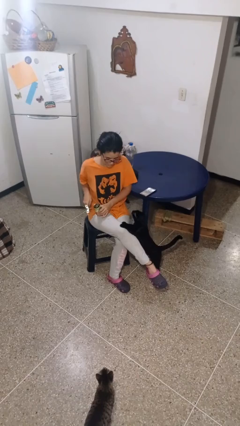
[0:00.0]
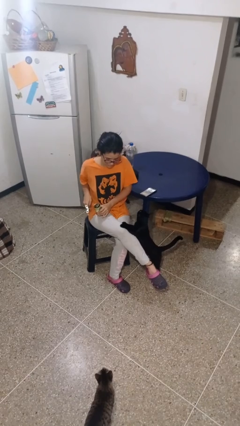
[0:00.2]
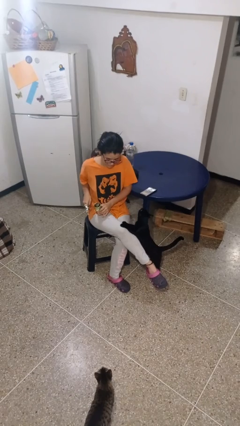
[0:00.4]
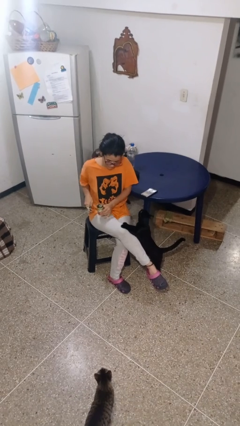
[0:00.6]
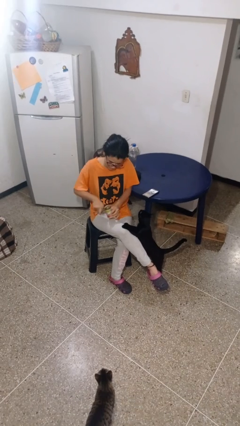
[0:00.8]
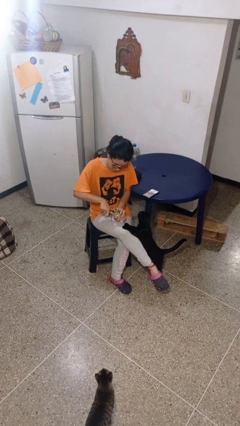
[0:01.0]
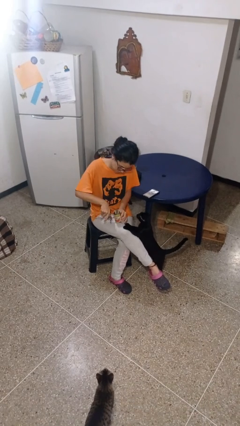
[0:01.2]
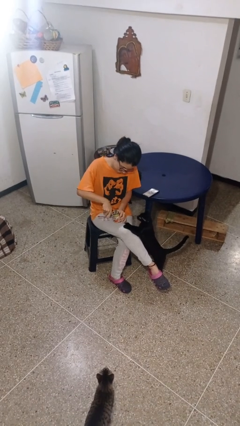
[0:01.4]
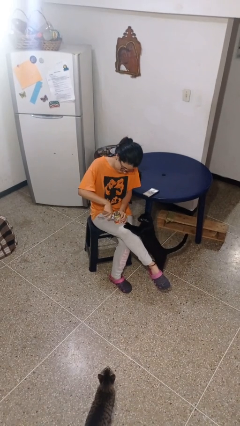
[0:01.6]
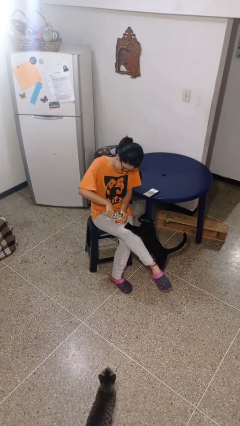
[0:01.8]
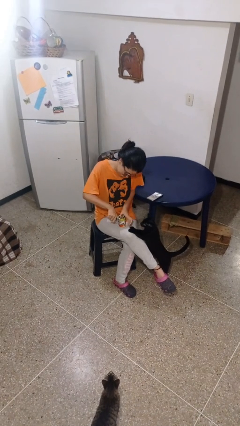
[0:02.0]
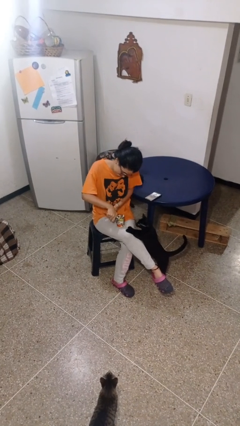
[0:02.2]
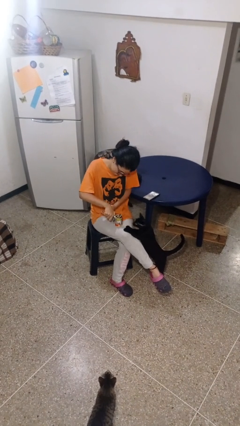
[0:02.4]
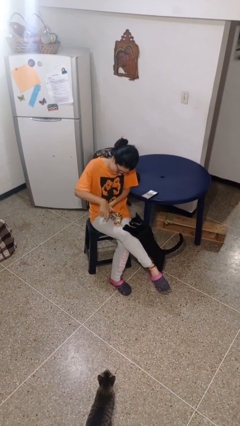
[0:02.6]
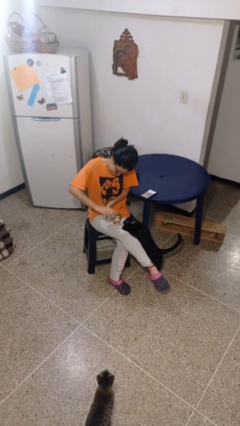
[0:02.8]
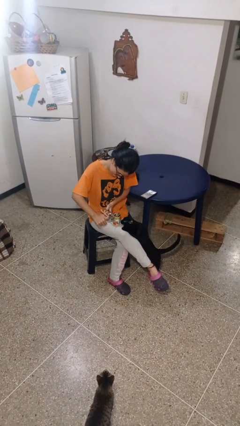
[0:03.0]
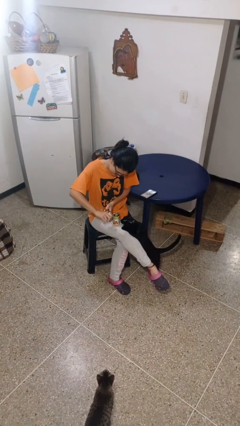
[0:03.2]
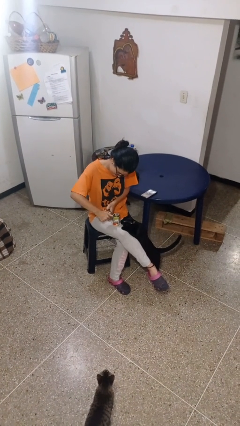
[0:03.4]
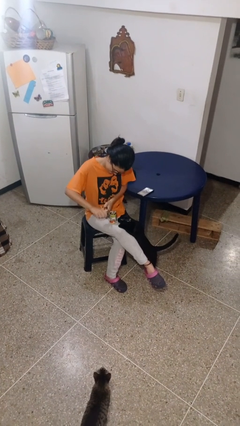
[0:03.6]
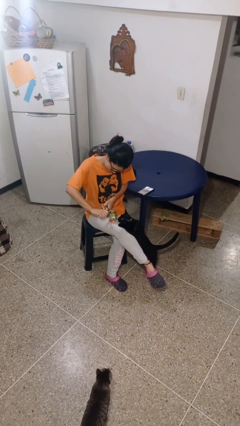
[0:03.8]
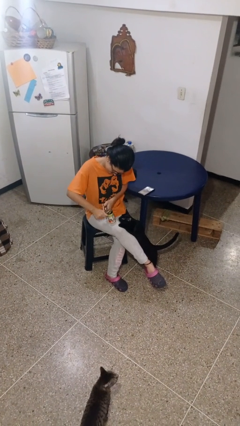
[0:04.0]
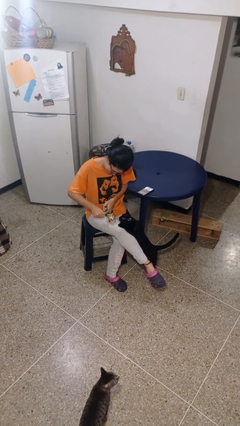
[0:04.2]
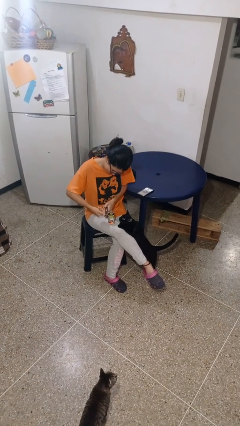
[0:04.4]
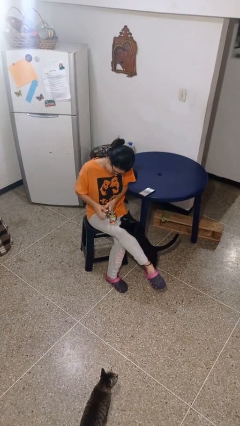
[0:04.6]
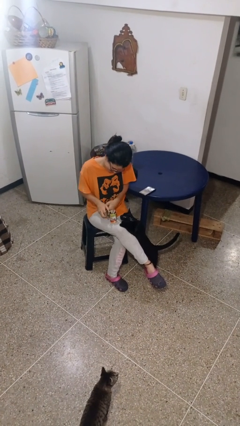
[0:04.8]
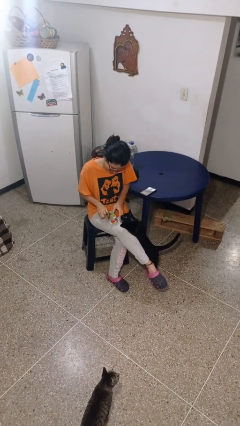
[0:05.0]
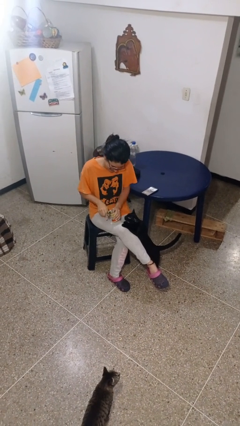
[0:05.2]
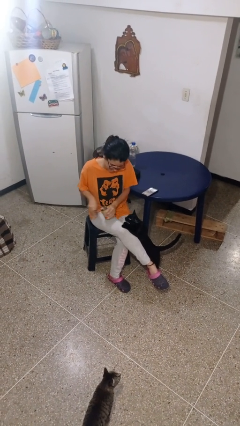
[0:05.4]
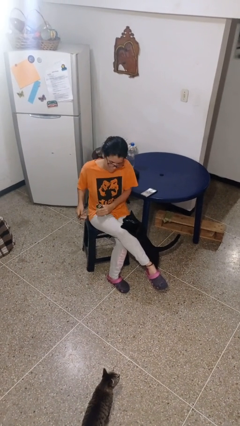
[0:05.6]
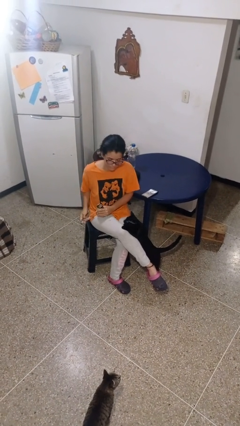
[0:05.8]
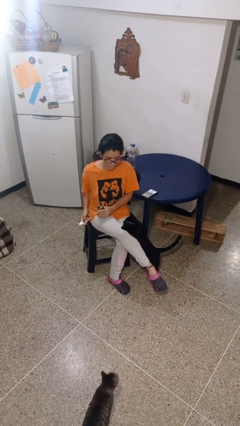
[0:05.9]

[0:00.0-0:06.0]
person opens can with can opener

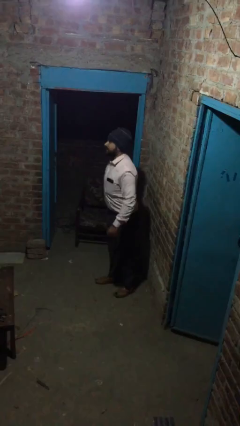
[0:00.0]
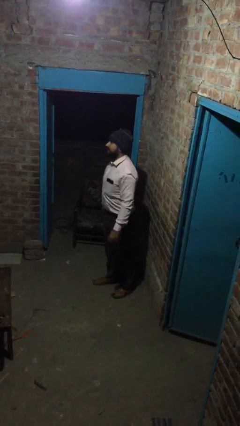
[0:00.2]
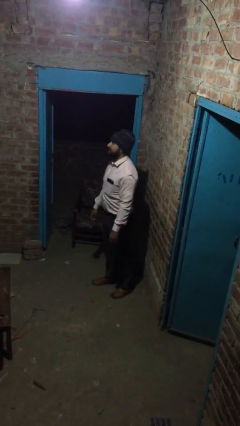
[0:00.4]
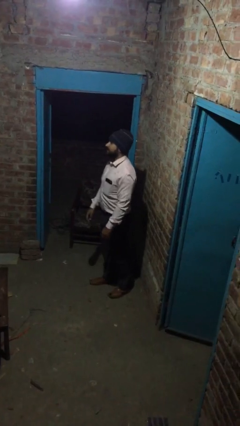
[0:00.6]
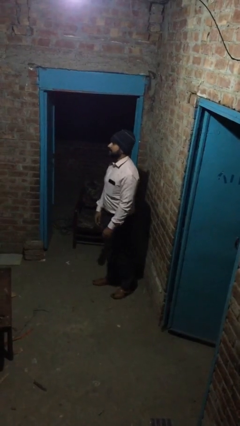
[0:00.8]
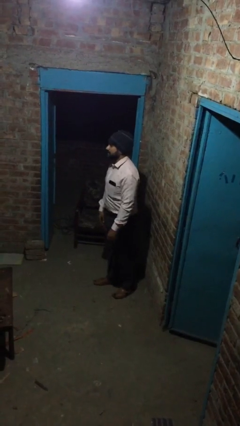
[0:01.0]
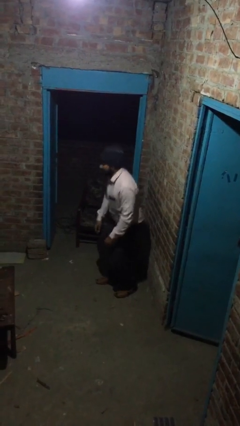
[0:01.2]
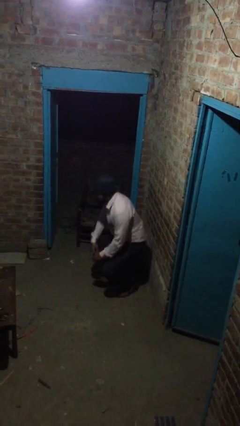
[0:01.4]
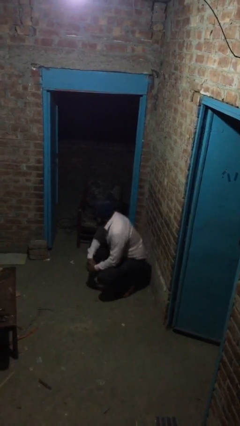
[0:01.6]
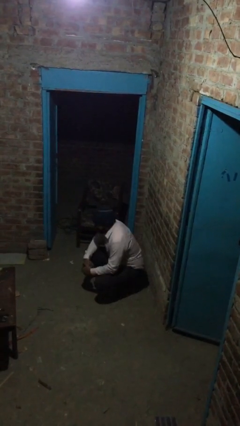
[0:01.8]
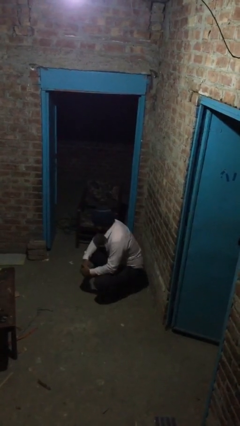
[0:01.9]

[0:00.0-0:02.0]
person sits down

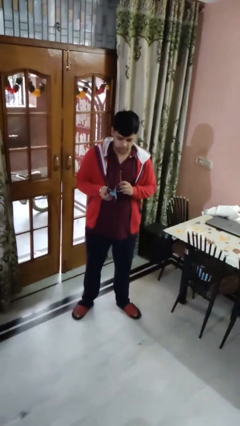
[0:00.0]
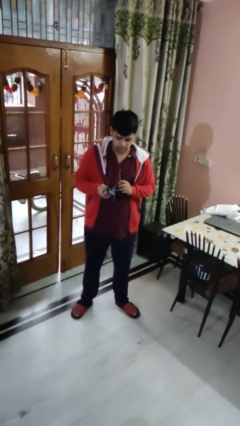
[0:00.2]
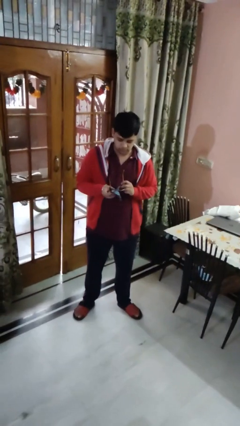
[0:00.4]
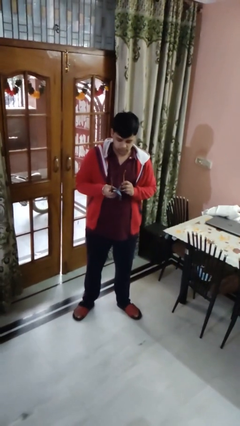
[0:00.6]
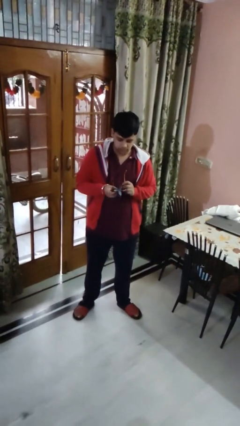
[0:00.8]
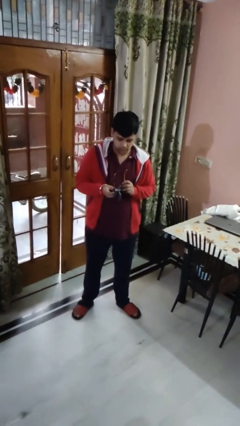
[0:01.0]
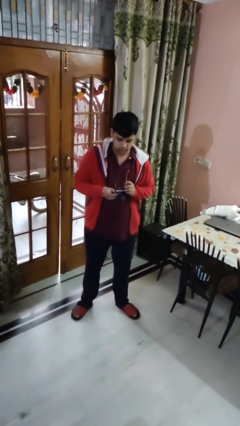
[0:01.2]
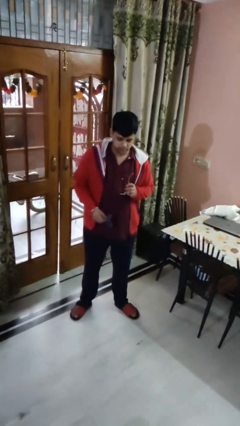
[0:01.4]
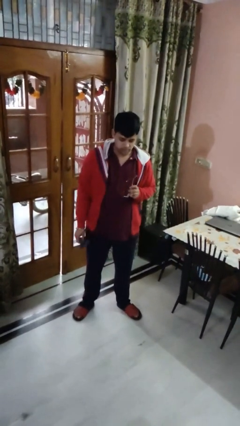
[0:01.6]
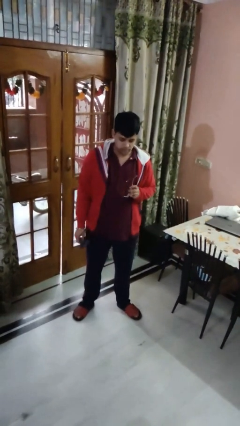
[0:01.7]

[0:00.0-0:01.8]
person cleans eyeglasses

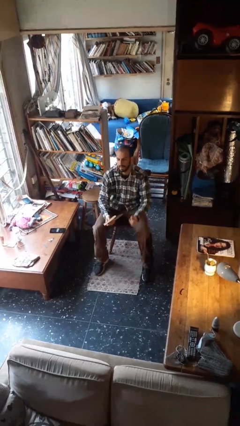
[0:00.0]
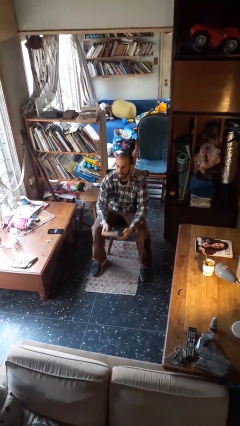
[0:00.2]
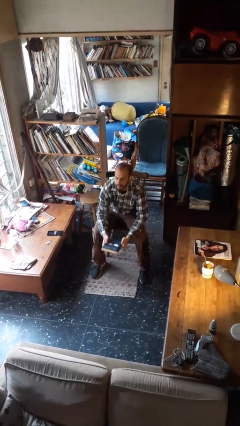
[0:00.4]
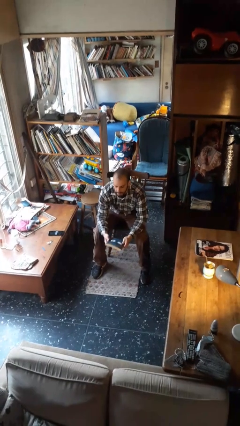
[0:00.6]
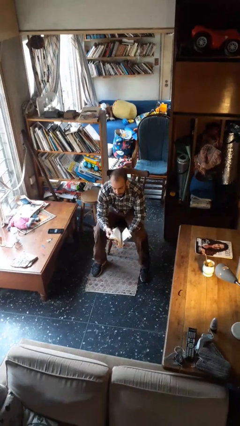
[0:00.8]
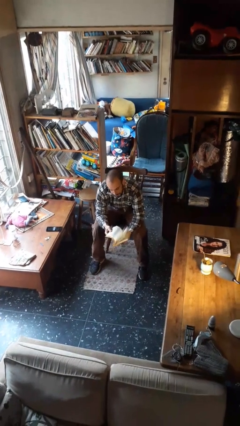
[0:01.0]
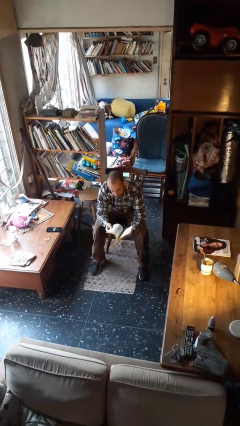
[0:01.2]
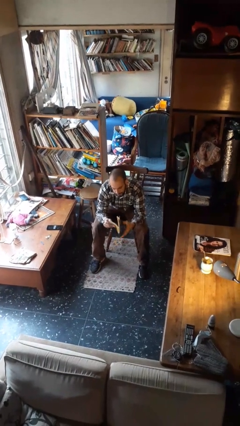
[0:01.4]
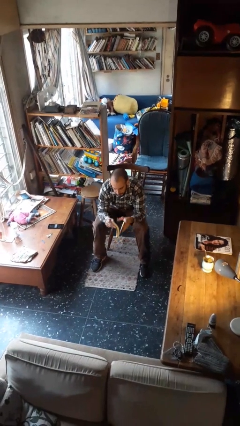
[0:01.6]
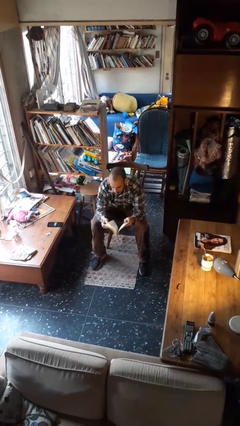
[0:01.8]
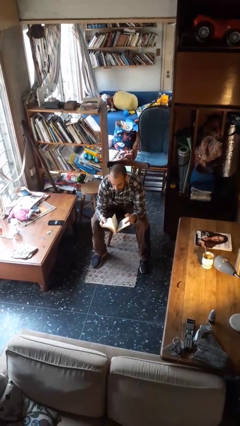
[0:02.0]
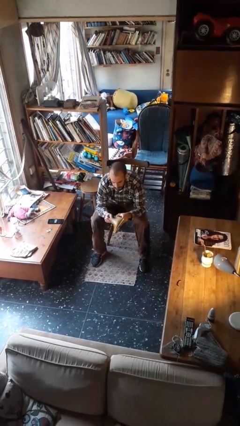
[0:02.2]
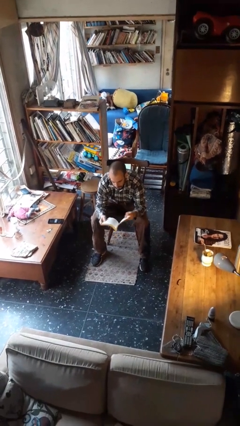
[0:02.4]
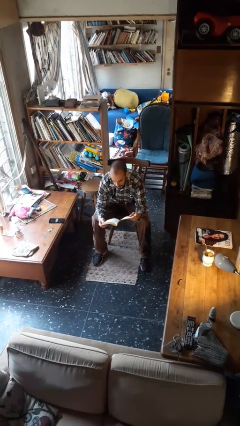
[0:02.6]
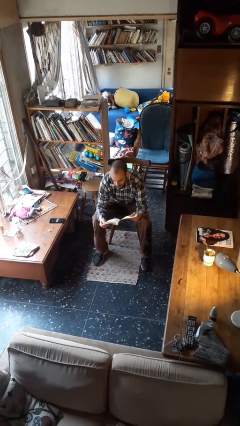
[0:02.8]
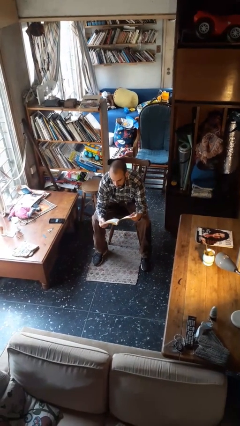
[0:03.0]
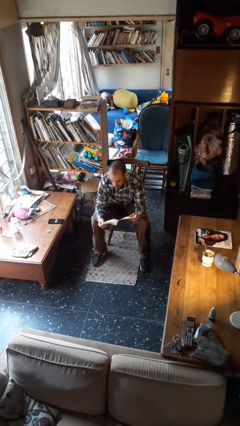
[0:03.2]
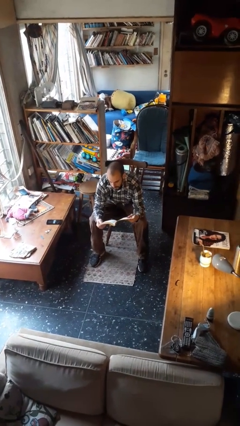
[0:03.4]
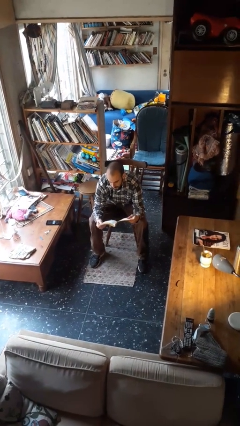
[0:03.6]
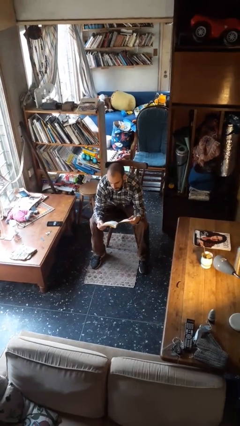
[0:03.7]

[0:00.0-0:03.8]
person reads book

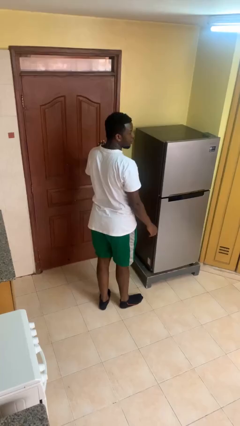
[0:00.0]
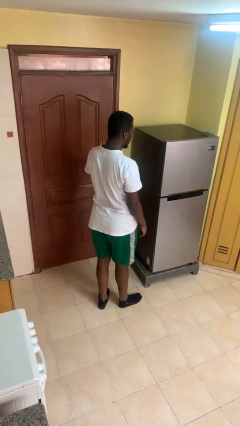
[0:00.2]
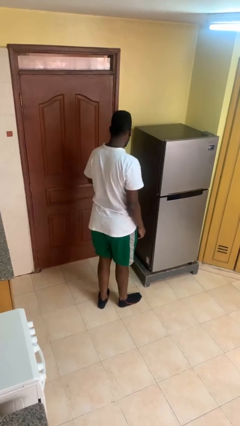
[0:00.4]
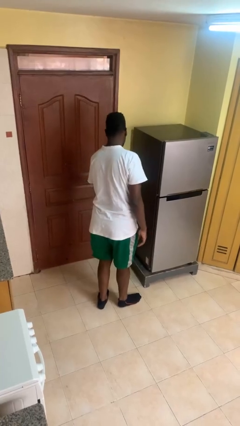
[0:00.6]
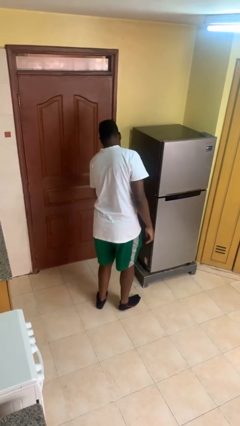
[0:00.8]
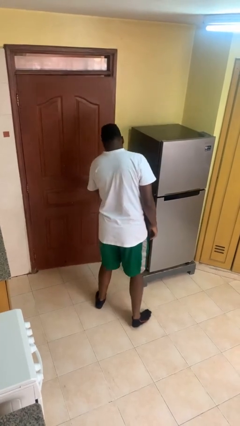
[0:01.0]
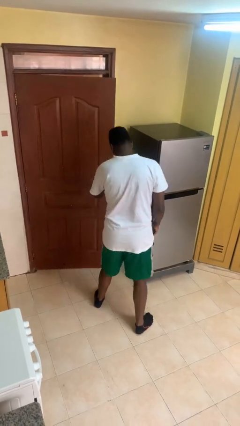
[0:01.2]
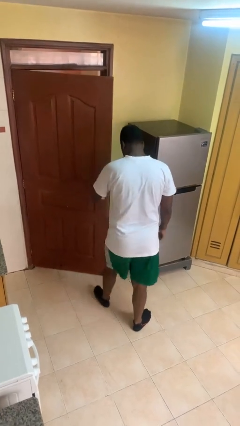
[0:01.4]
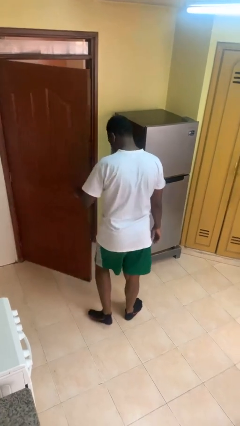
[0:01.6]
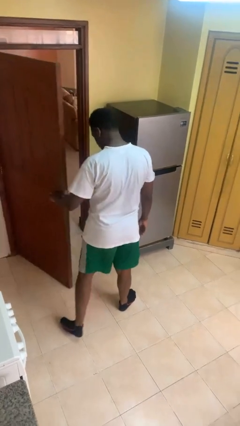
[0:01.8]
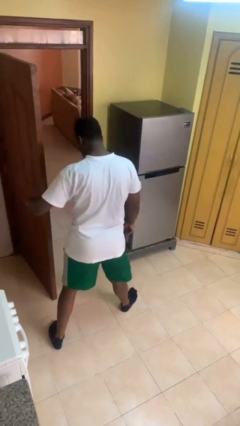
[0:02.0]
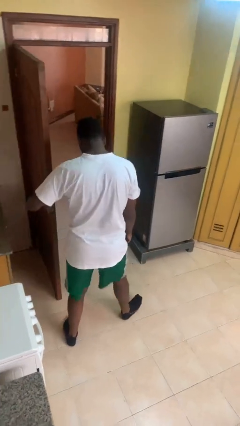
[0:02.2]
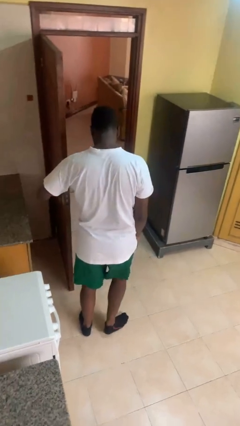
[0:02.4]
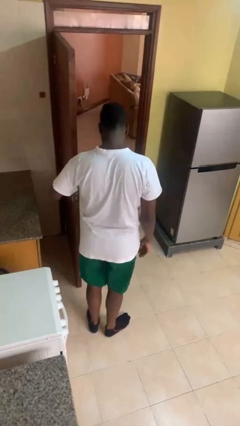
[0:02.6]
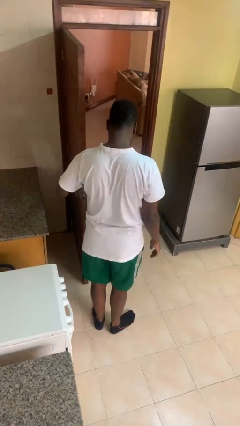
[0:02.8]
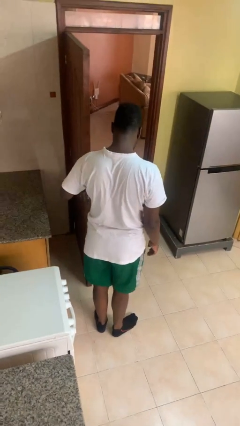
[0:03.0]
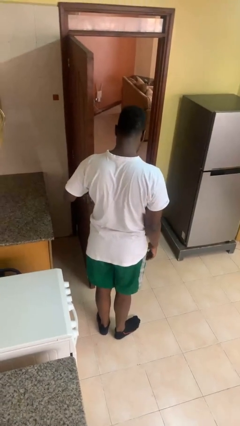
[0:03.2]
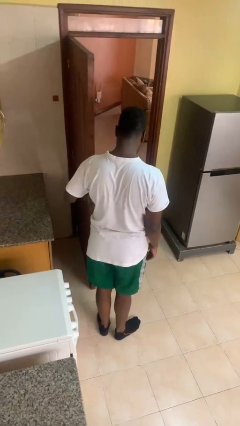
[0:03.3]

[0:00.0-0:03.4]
person opens facility door

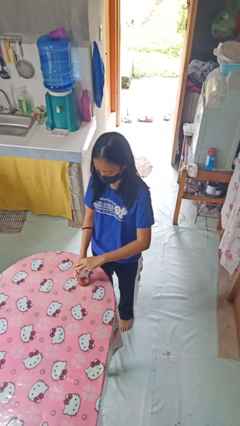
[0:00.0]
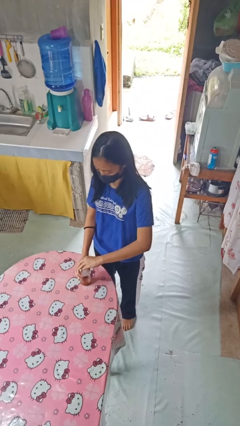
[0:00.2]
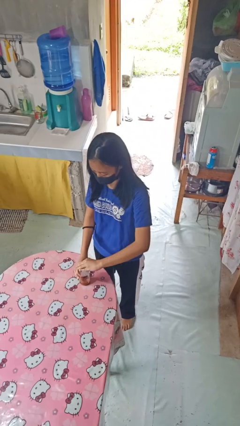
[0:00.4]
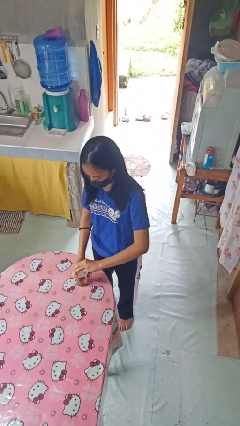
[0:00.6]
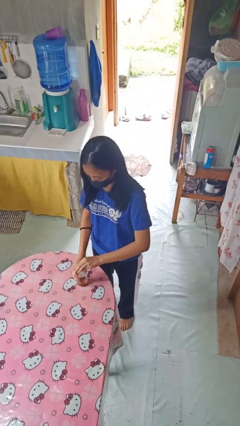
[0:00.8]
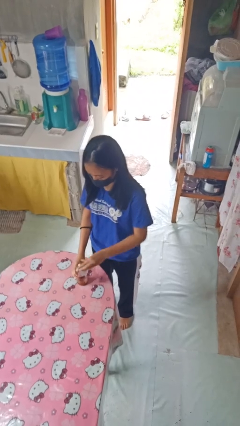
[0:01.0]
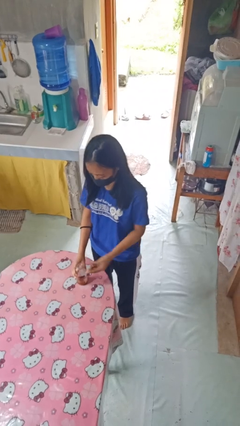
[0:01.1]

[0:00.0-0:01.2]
person opens jar
